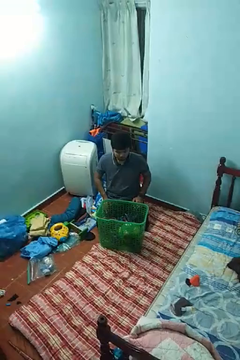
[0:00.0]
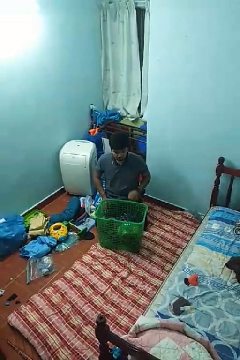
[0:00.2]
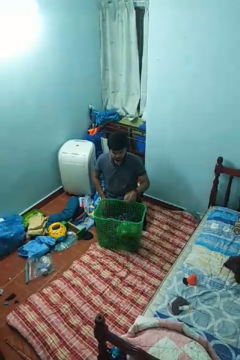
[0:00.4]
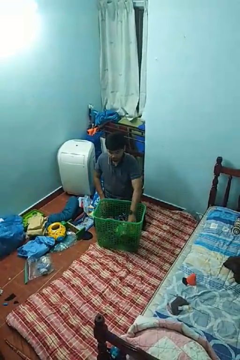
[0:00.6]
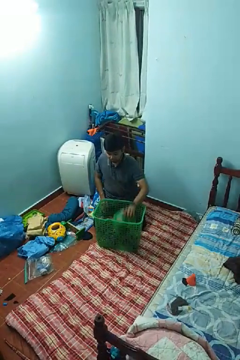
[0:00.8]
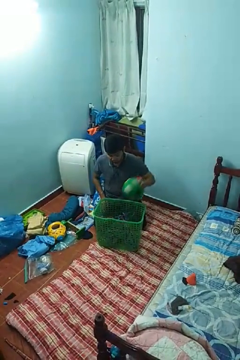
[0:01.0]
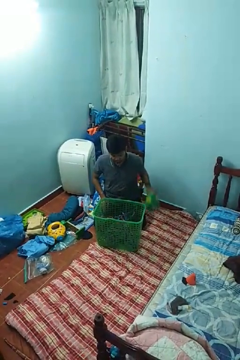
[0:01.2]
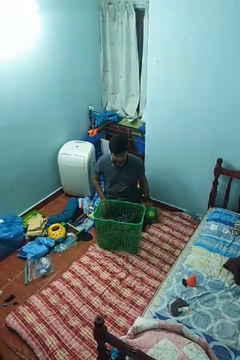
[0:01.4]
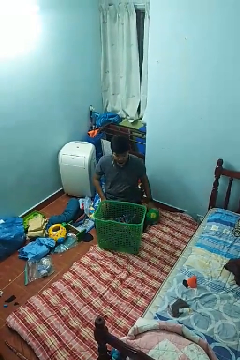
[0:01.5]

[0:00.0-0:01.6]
person takes object from basket

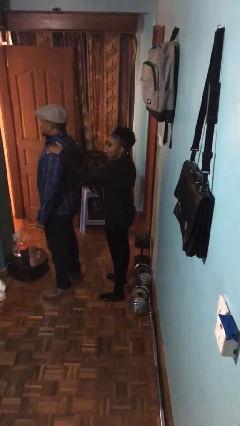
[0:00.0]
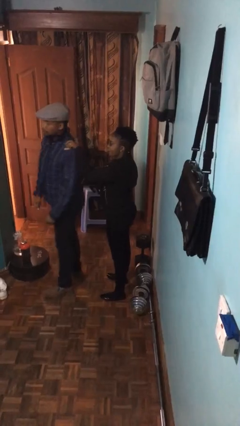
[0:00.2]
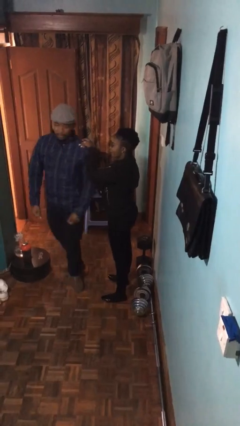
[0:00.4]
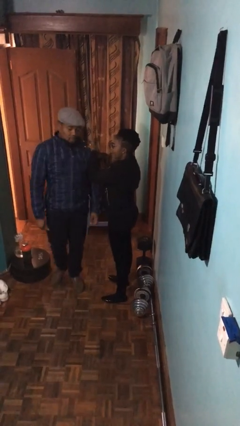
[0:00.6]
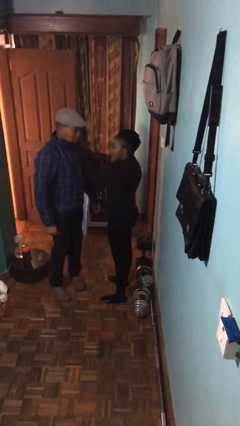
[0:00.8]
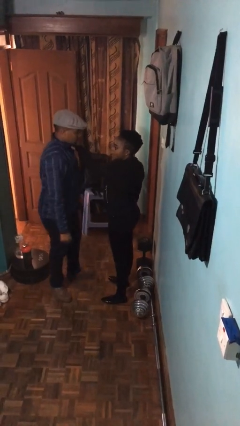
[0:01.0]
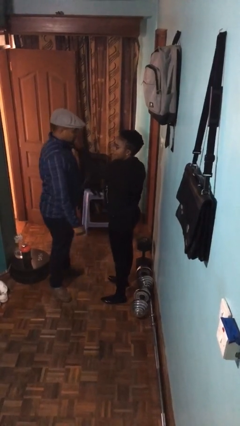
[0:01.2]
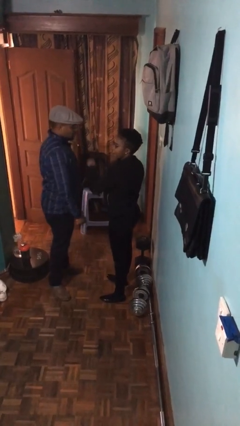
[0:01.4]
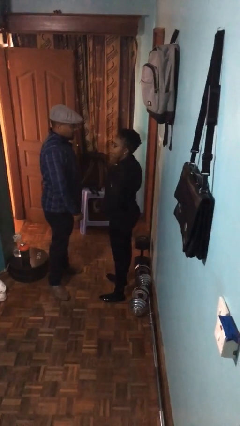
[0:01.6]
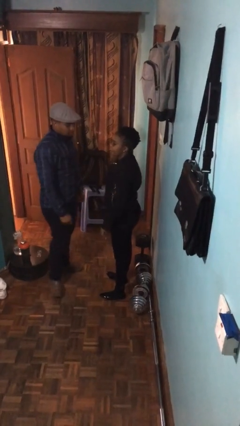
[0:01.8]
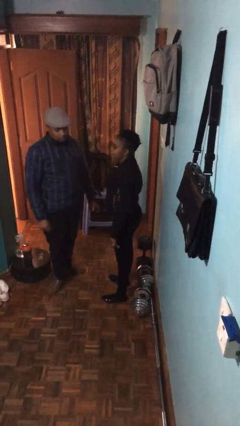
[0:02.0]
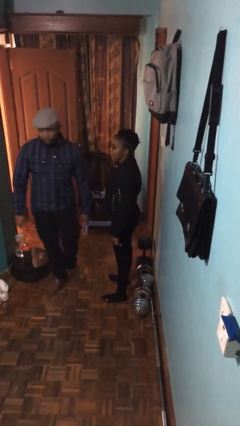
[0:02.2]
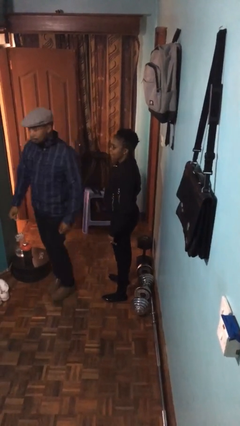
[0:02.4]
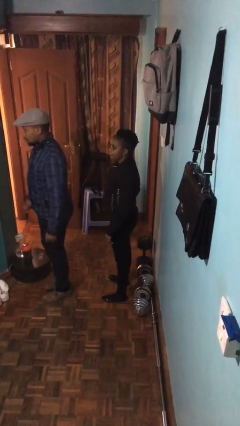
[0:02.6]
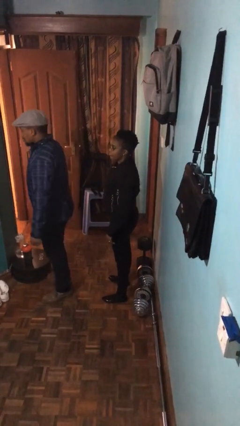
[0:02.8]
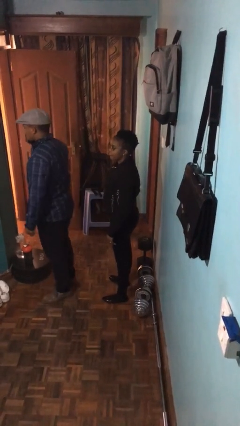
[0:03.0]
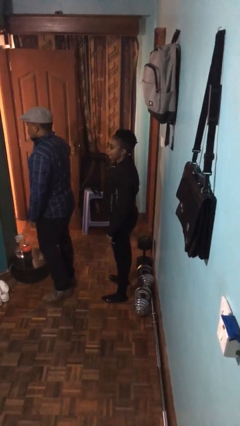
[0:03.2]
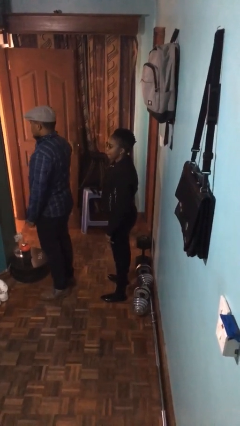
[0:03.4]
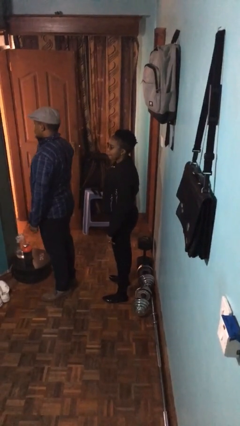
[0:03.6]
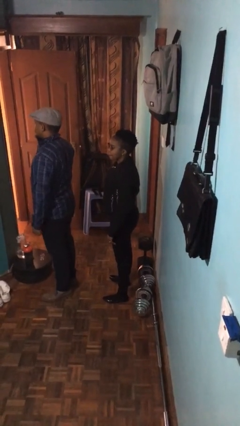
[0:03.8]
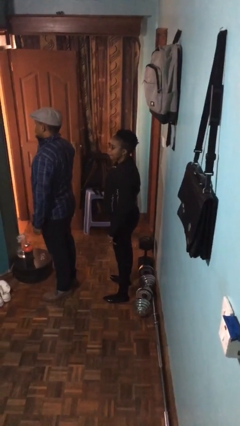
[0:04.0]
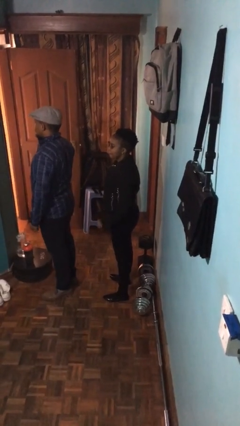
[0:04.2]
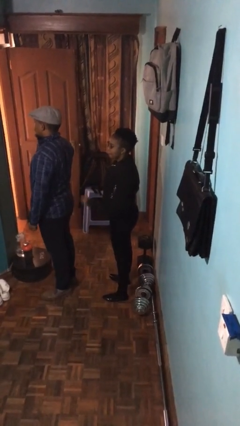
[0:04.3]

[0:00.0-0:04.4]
person spins person around

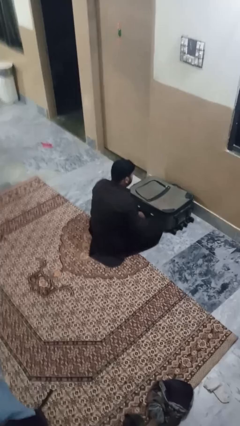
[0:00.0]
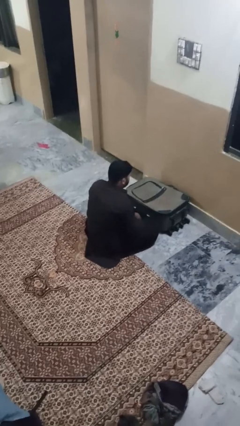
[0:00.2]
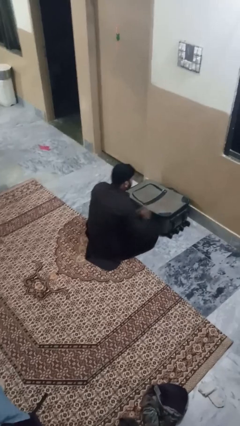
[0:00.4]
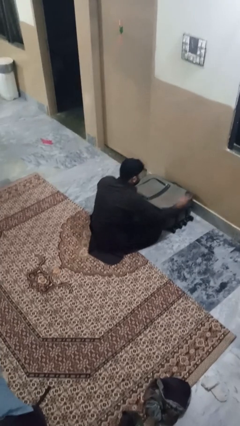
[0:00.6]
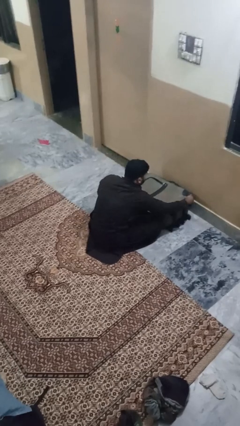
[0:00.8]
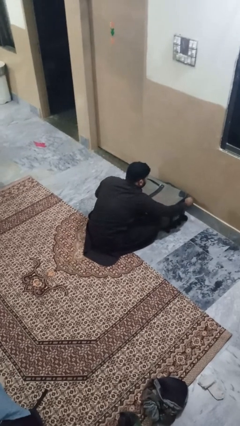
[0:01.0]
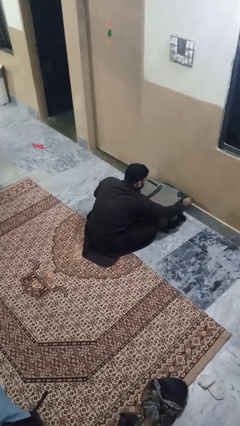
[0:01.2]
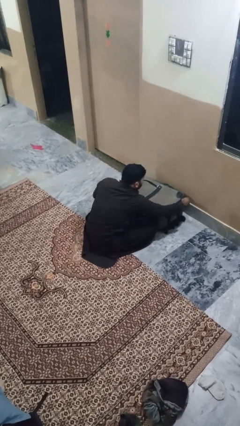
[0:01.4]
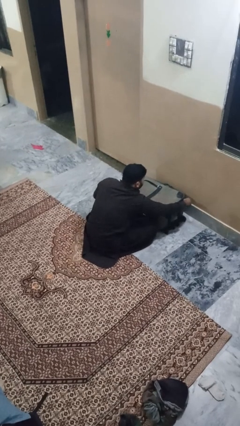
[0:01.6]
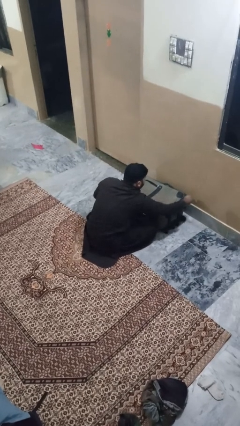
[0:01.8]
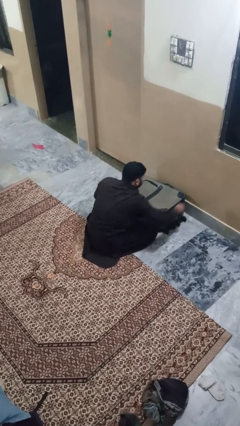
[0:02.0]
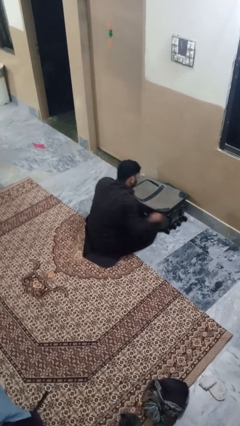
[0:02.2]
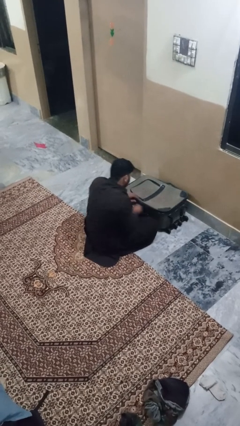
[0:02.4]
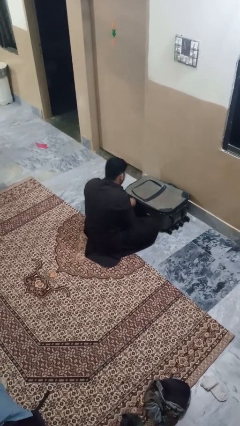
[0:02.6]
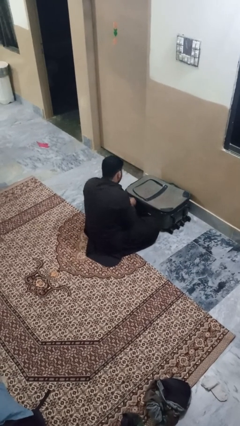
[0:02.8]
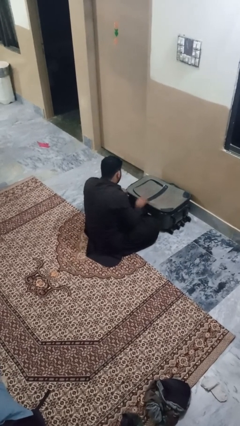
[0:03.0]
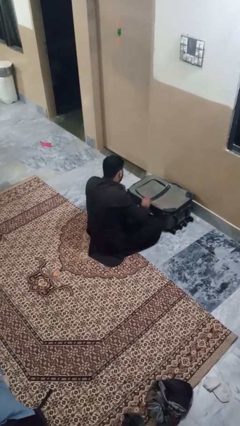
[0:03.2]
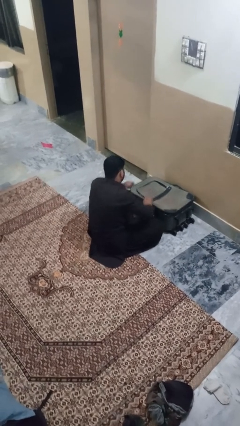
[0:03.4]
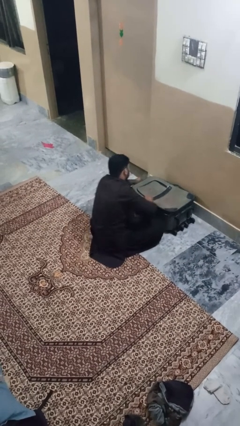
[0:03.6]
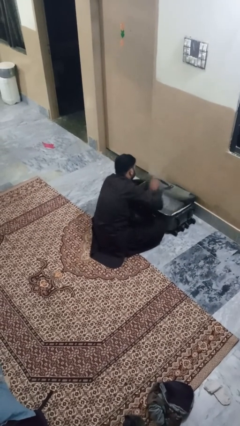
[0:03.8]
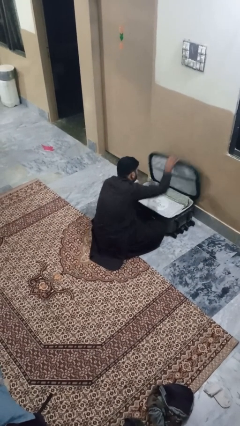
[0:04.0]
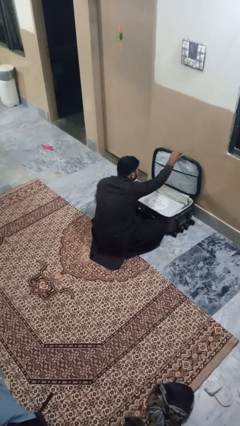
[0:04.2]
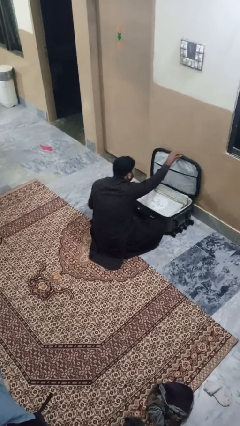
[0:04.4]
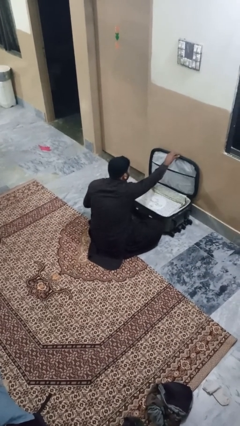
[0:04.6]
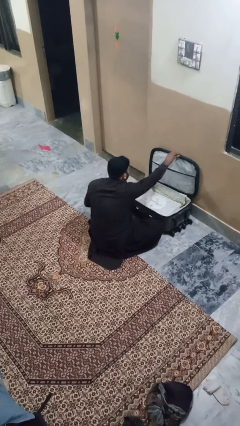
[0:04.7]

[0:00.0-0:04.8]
person opens suitcase

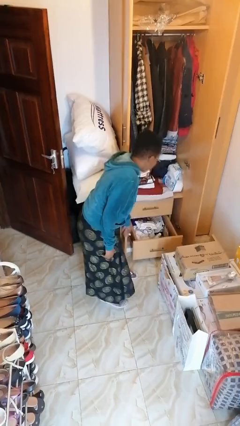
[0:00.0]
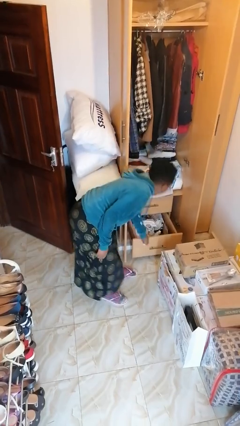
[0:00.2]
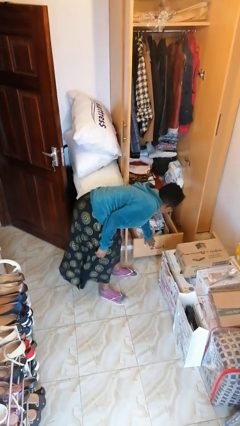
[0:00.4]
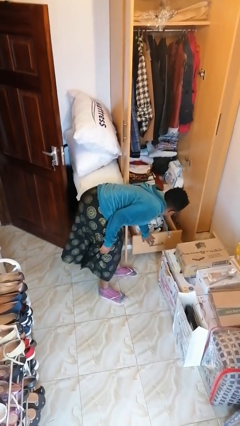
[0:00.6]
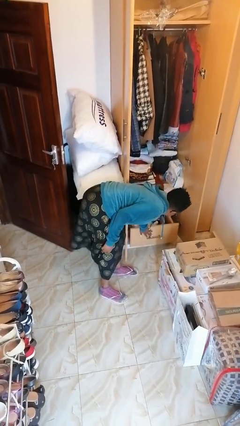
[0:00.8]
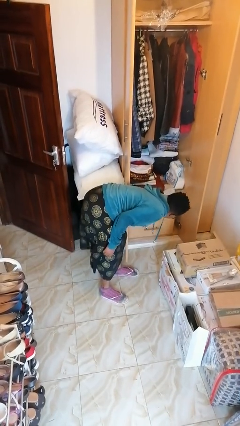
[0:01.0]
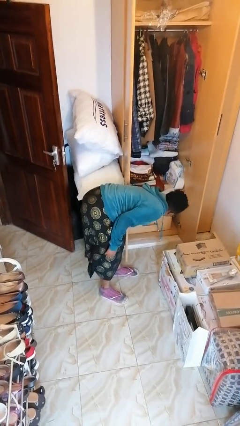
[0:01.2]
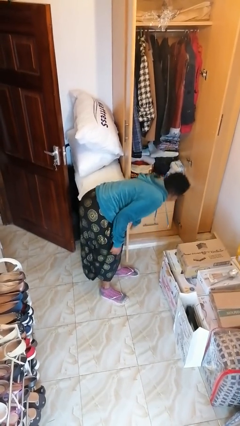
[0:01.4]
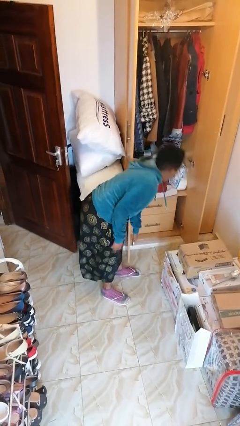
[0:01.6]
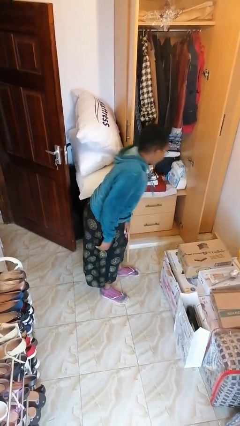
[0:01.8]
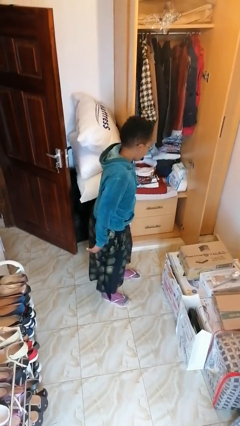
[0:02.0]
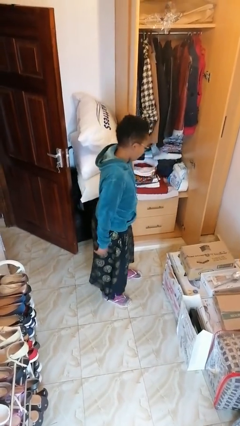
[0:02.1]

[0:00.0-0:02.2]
person closes dresser drawer

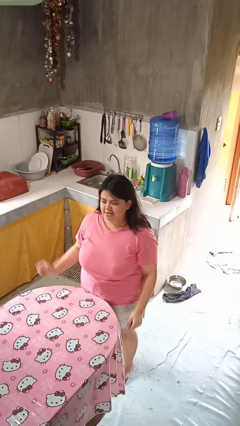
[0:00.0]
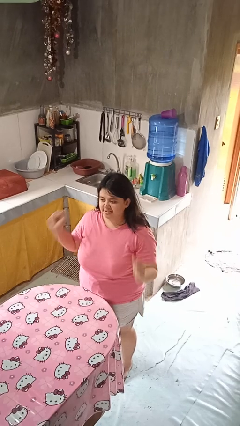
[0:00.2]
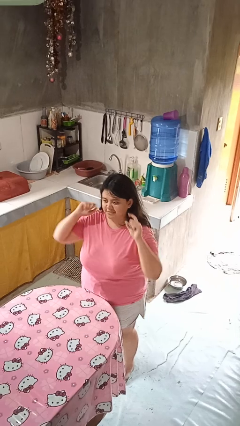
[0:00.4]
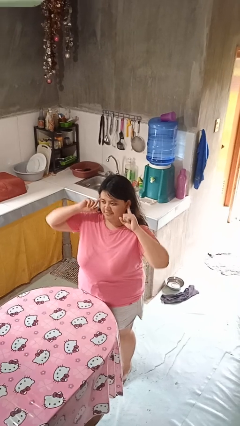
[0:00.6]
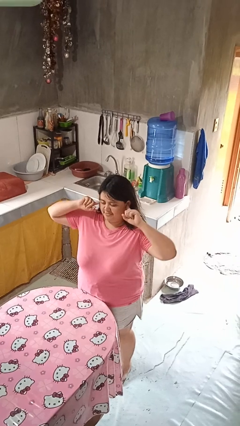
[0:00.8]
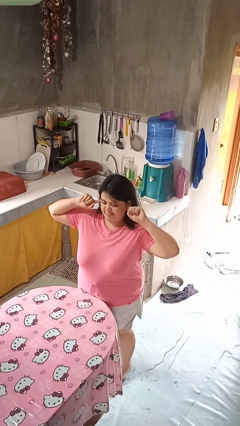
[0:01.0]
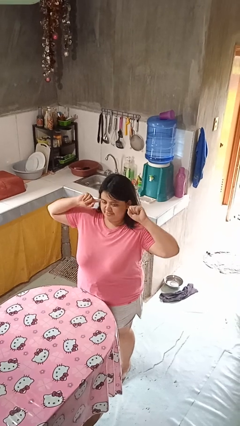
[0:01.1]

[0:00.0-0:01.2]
person puts fingers in ear

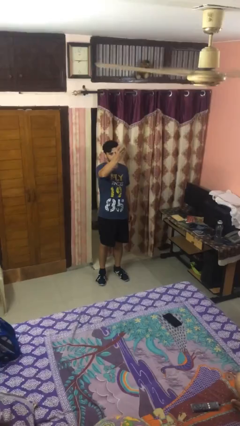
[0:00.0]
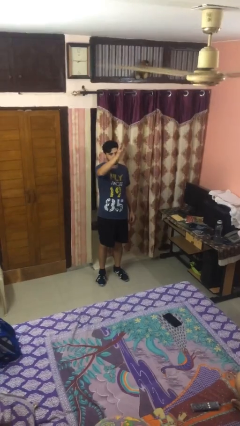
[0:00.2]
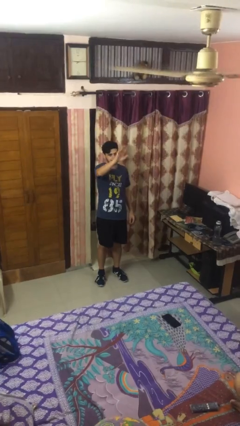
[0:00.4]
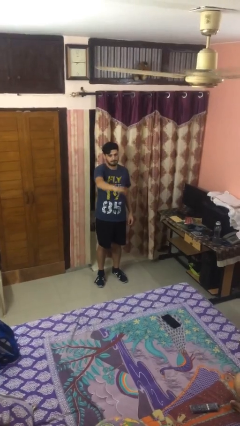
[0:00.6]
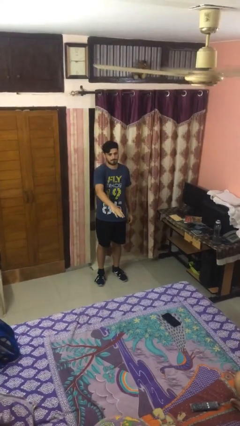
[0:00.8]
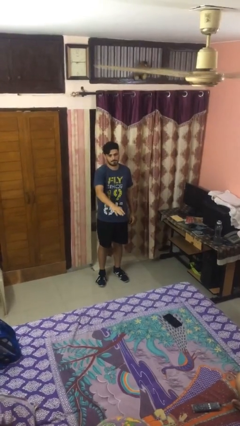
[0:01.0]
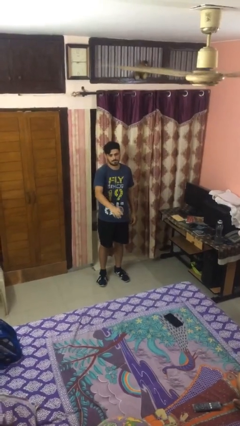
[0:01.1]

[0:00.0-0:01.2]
person gestures swipe down

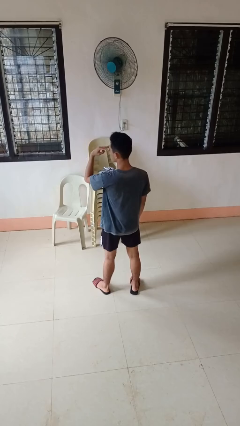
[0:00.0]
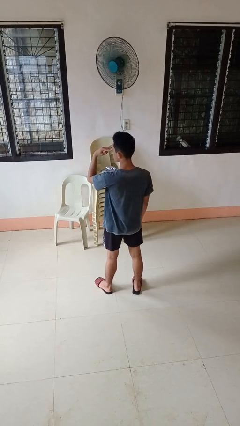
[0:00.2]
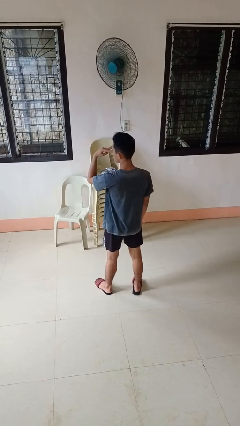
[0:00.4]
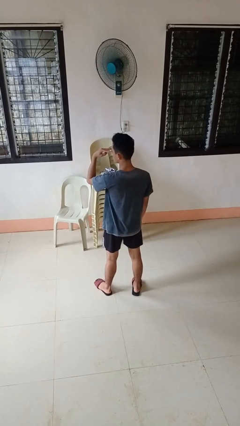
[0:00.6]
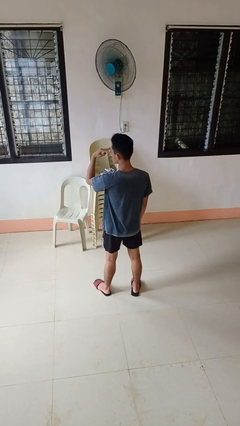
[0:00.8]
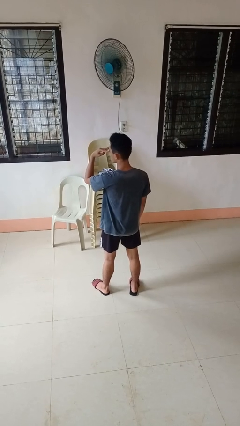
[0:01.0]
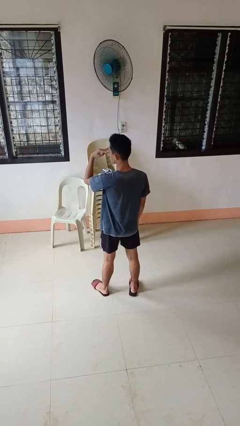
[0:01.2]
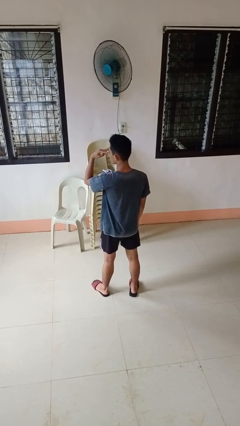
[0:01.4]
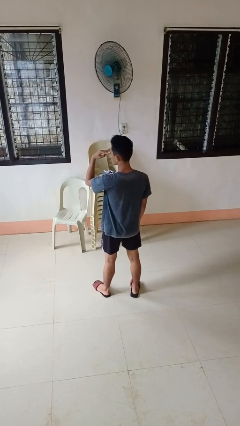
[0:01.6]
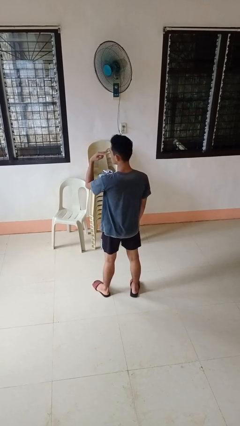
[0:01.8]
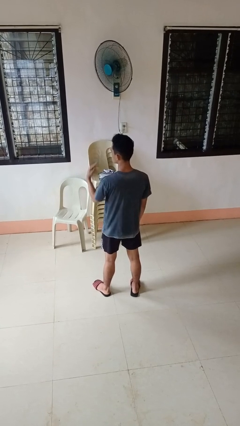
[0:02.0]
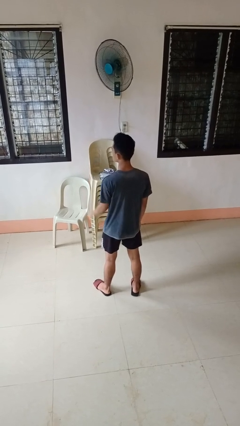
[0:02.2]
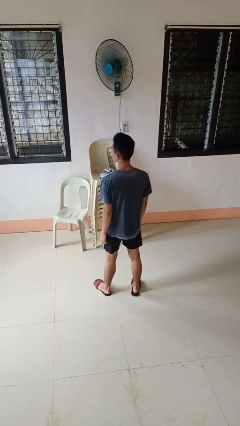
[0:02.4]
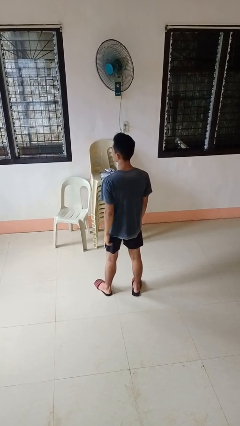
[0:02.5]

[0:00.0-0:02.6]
person gestures watch closely
